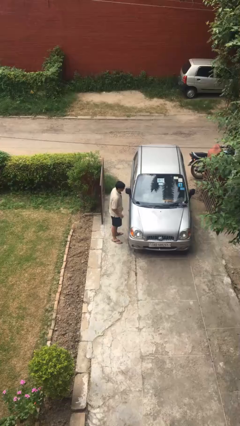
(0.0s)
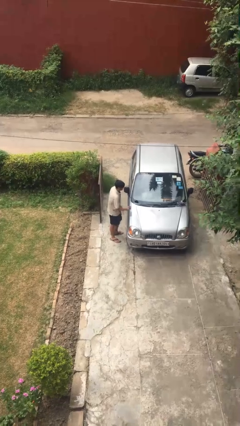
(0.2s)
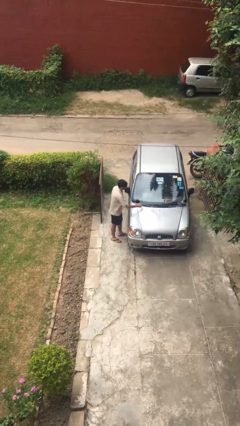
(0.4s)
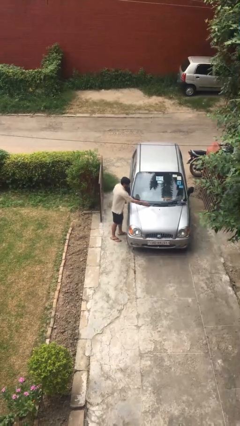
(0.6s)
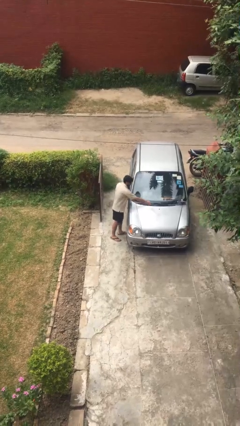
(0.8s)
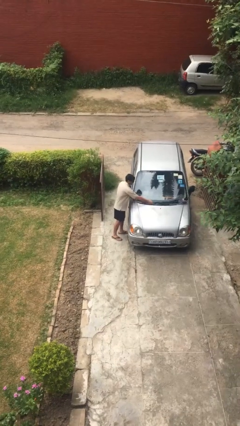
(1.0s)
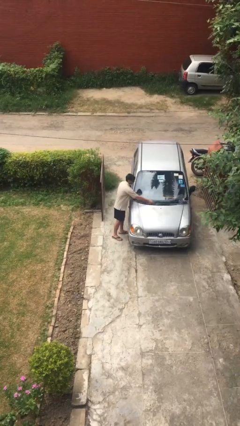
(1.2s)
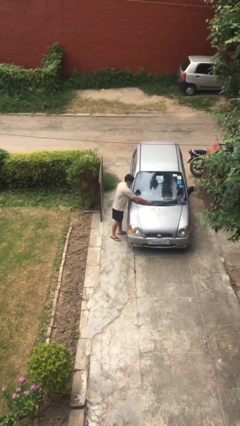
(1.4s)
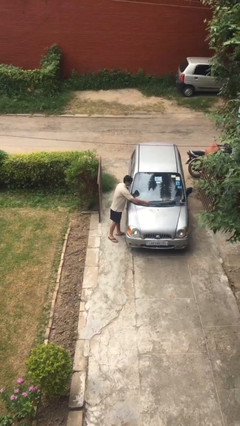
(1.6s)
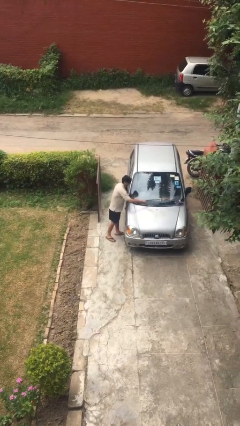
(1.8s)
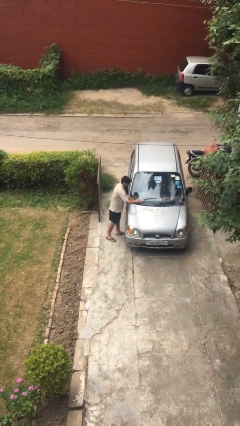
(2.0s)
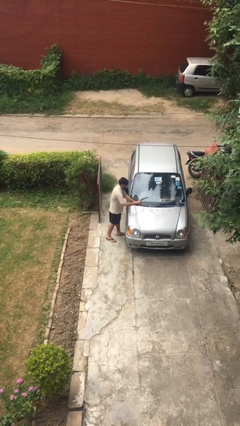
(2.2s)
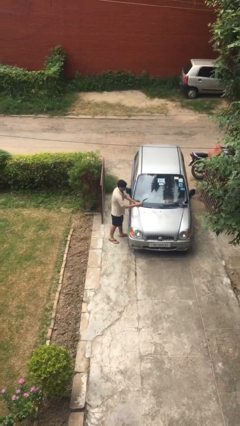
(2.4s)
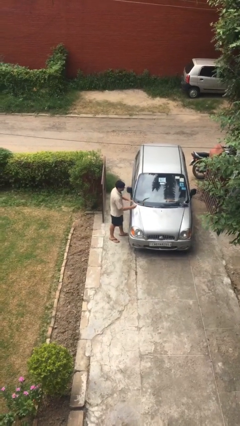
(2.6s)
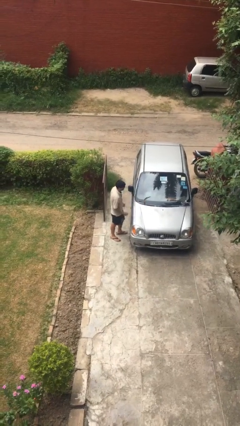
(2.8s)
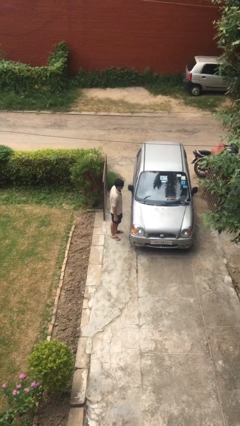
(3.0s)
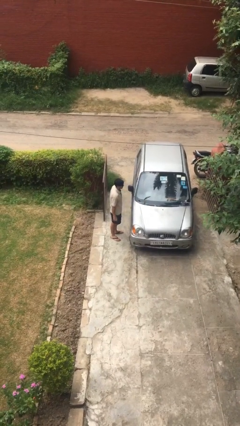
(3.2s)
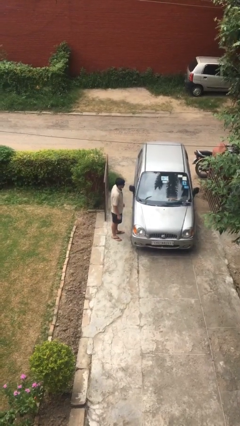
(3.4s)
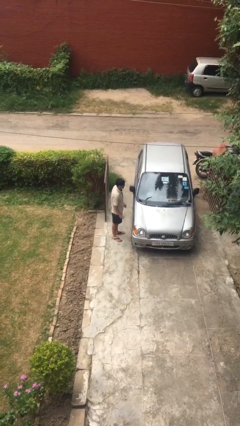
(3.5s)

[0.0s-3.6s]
person flips up car wipers

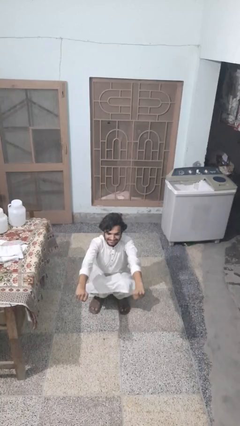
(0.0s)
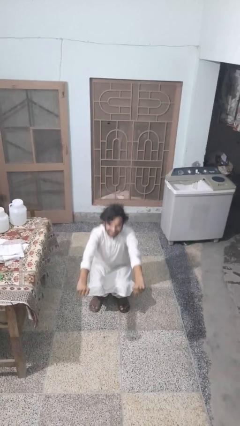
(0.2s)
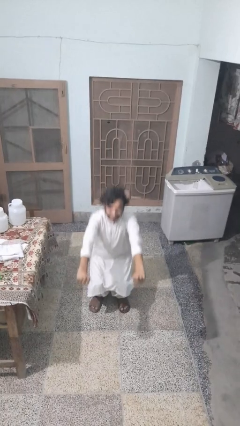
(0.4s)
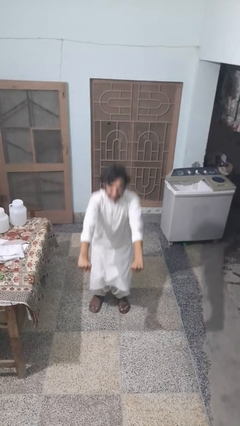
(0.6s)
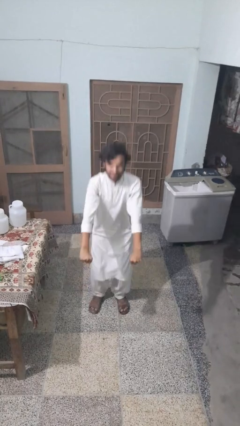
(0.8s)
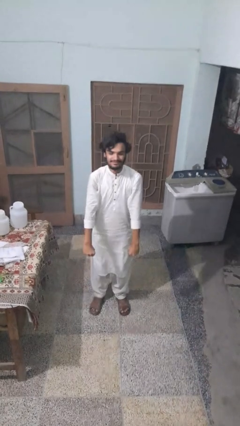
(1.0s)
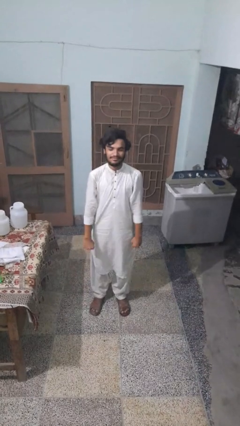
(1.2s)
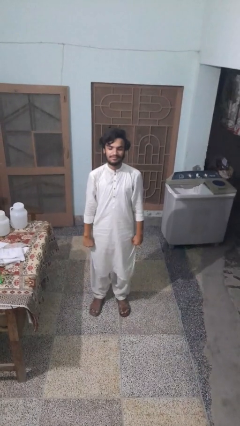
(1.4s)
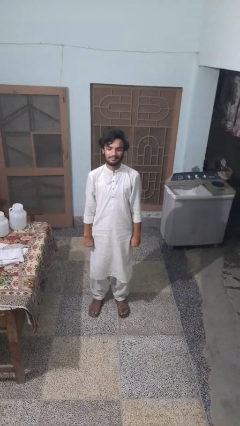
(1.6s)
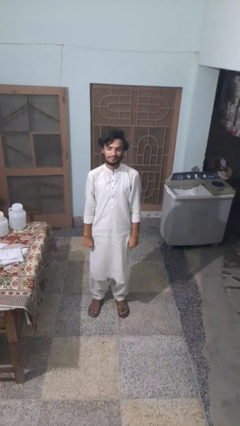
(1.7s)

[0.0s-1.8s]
person stands up

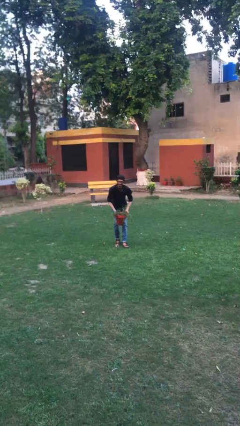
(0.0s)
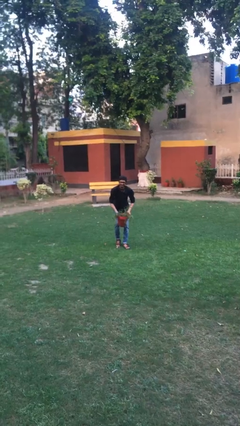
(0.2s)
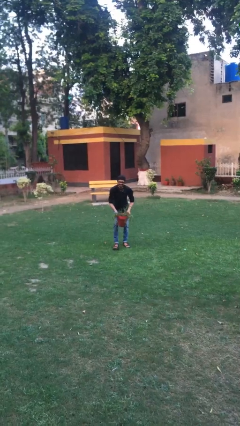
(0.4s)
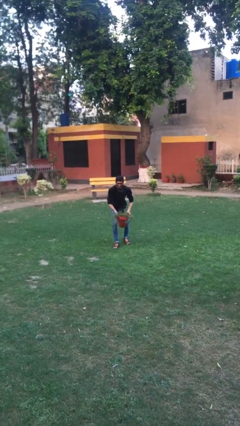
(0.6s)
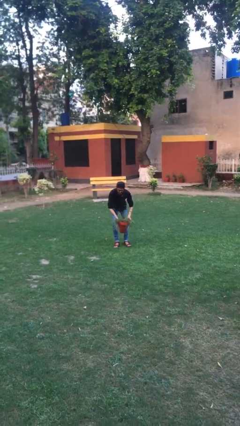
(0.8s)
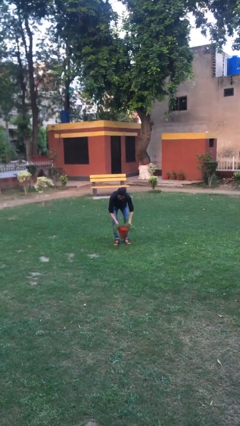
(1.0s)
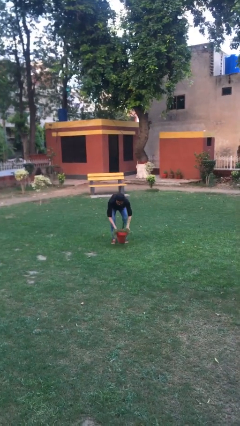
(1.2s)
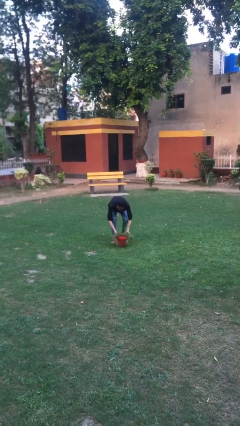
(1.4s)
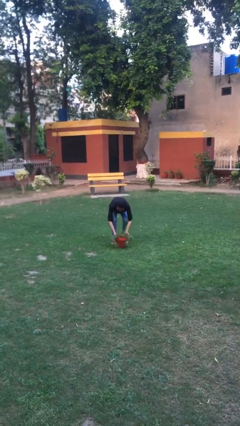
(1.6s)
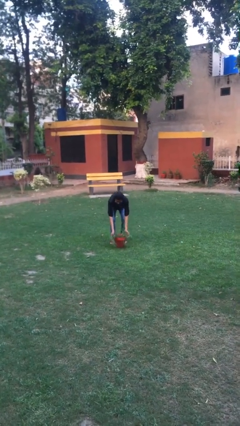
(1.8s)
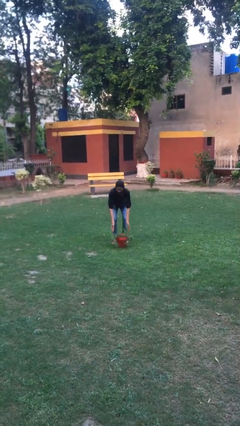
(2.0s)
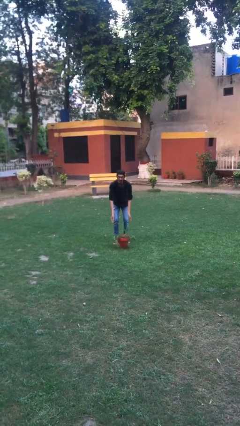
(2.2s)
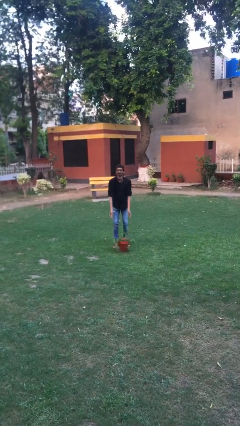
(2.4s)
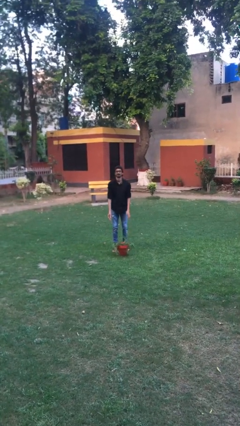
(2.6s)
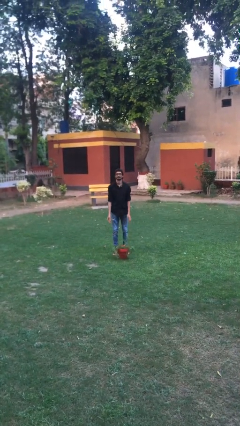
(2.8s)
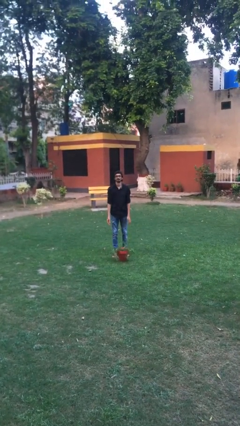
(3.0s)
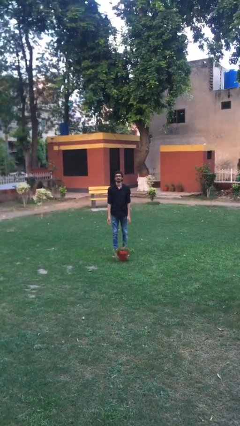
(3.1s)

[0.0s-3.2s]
person puts down object on floor

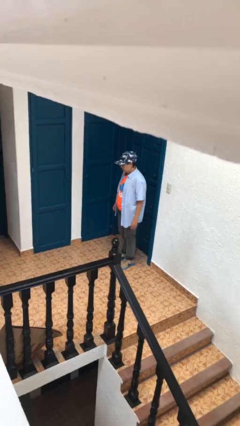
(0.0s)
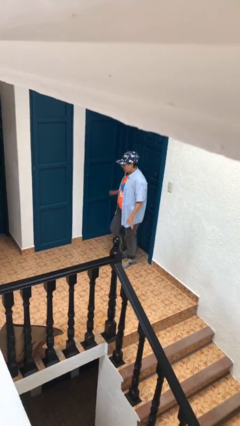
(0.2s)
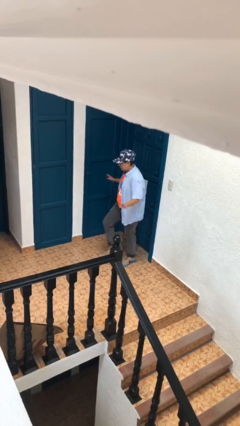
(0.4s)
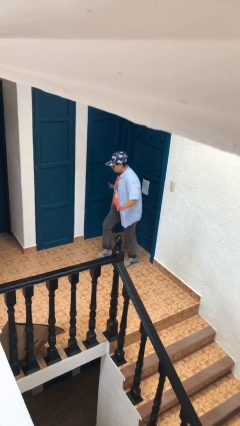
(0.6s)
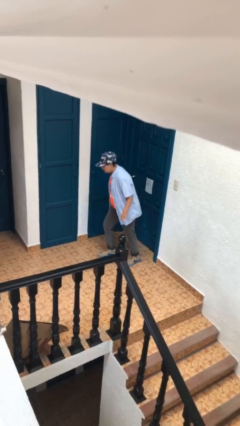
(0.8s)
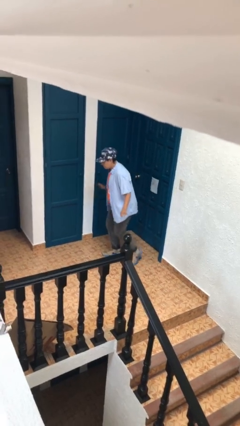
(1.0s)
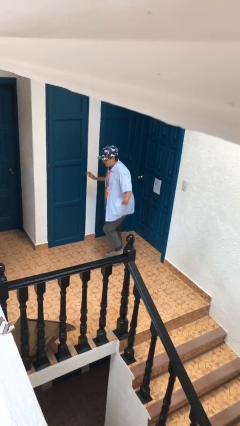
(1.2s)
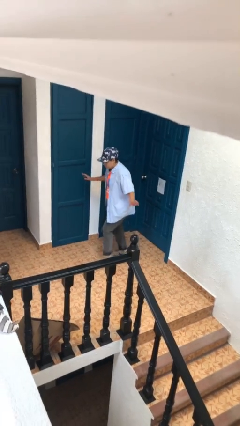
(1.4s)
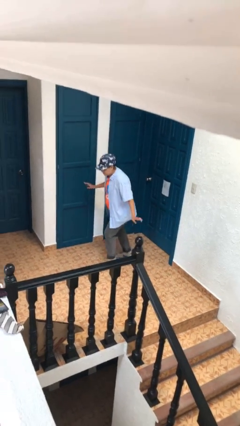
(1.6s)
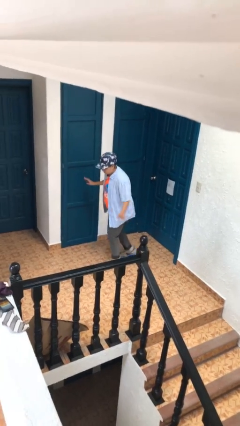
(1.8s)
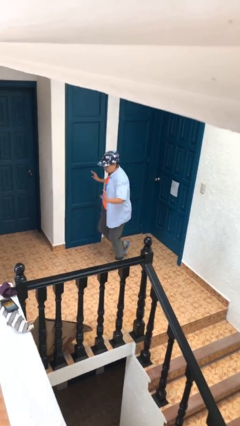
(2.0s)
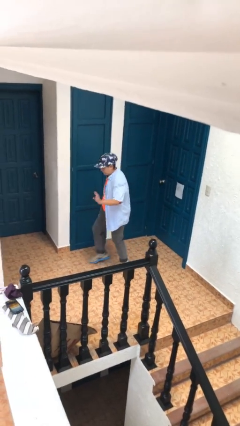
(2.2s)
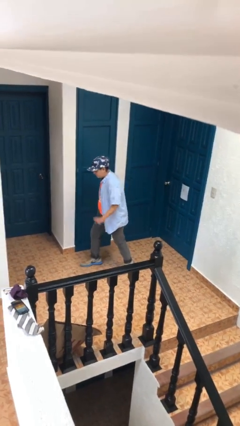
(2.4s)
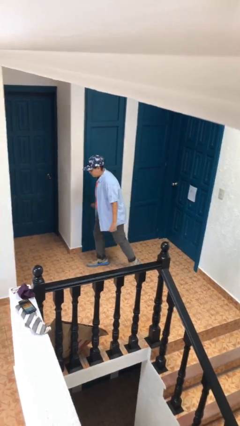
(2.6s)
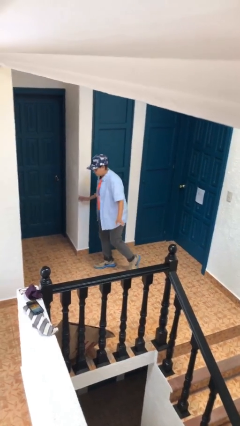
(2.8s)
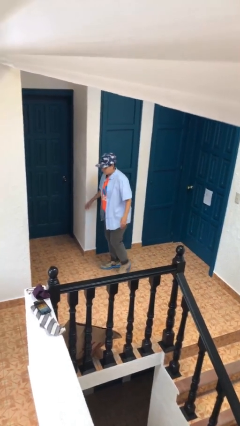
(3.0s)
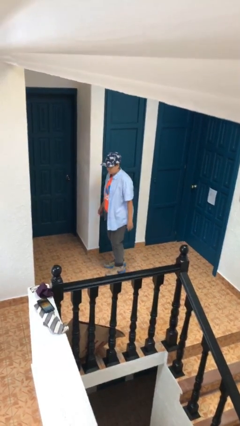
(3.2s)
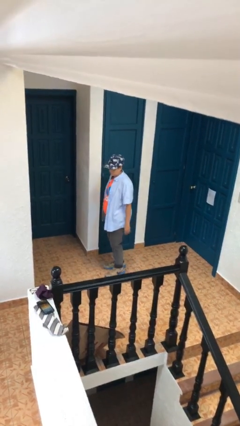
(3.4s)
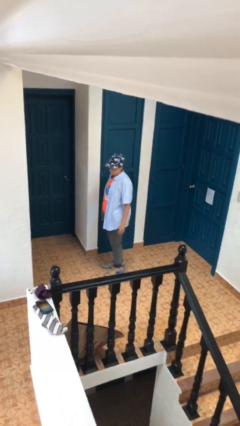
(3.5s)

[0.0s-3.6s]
person walks tiptoe

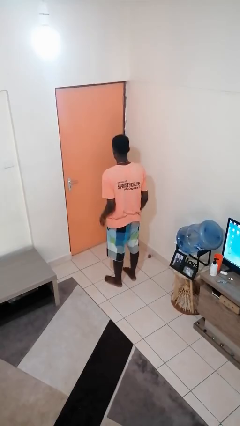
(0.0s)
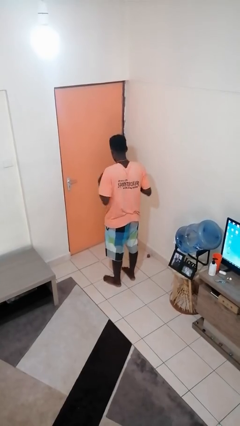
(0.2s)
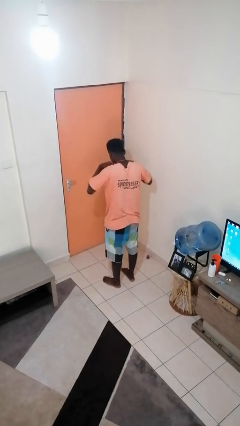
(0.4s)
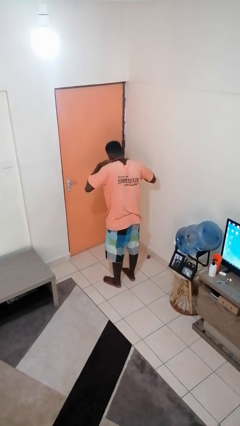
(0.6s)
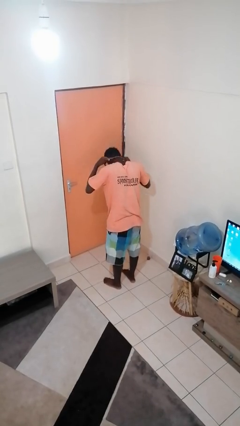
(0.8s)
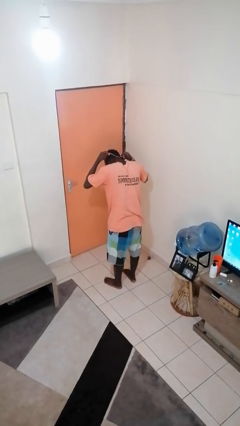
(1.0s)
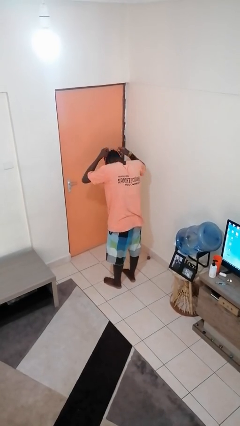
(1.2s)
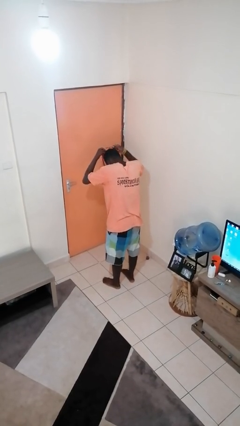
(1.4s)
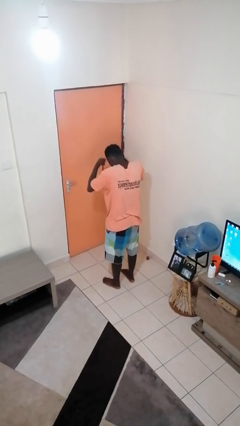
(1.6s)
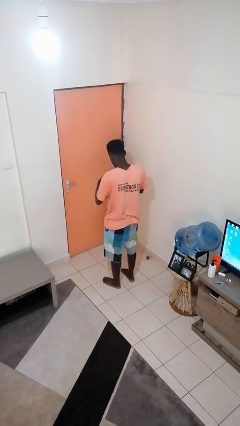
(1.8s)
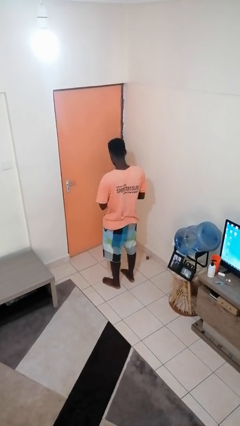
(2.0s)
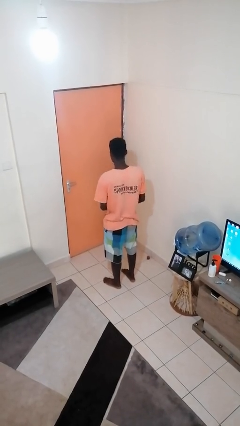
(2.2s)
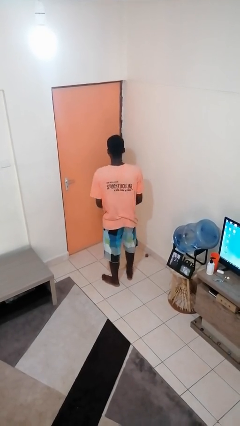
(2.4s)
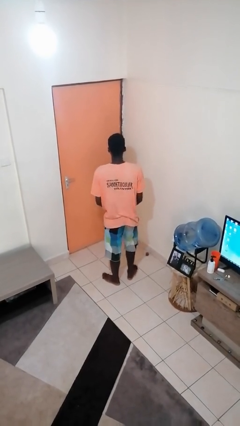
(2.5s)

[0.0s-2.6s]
person takes off necklace

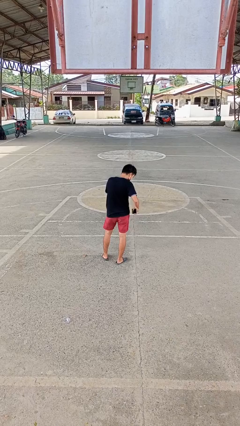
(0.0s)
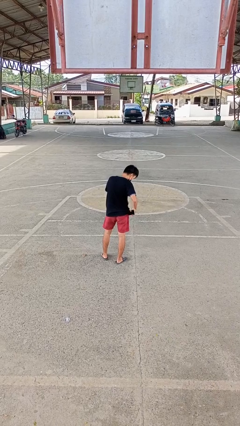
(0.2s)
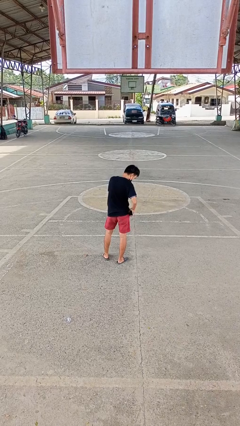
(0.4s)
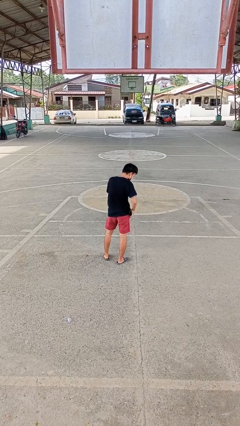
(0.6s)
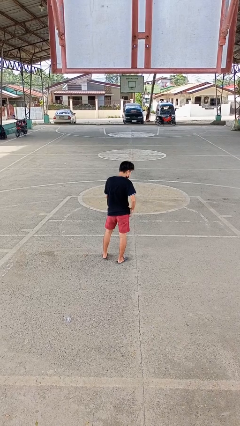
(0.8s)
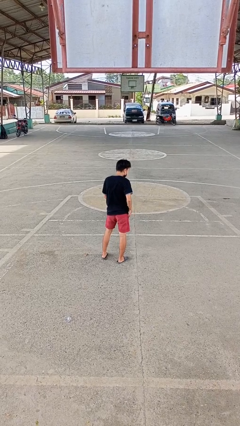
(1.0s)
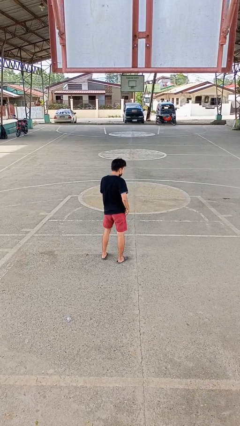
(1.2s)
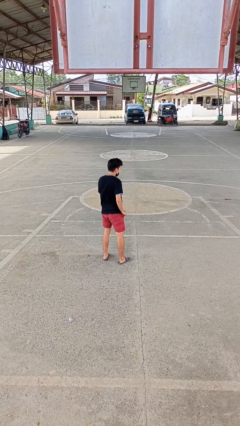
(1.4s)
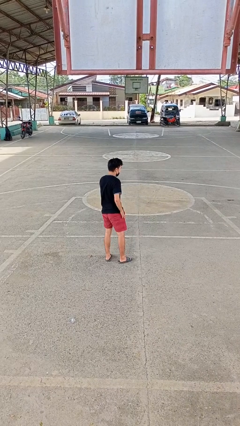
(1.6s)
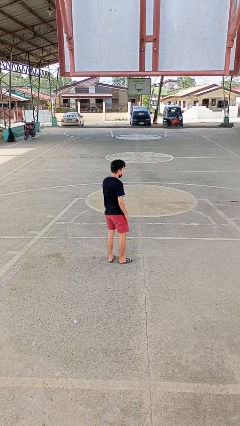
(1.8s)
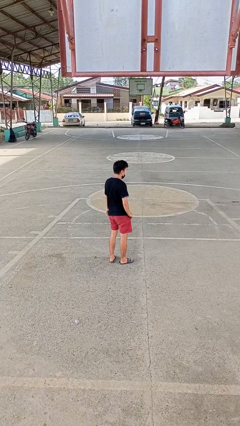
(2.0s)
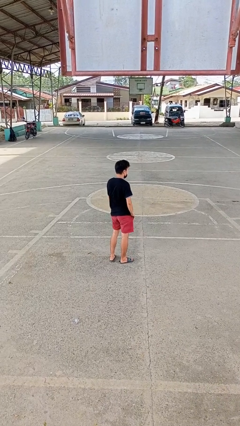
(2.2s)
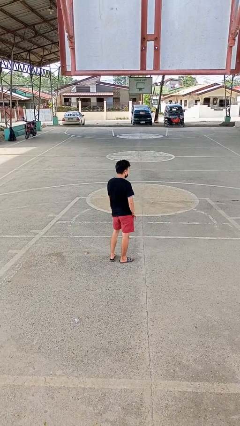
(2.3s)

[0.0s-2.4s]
person puts phone into pocket

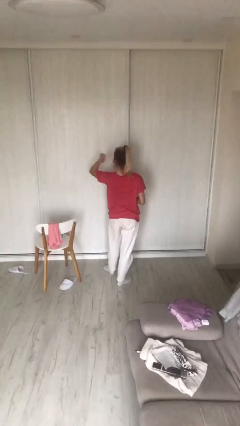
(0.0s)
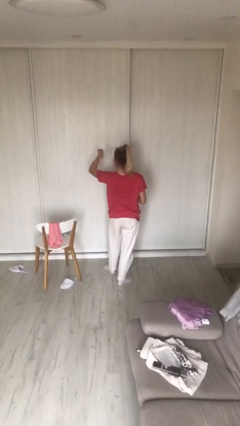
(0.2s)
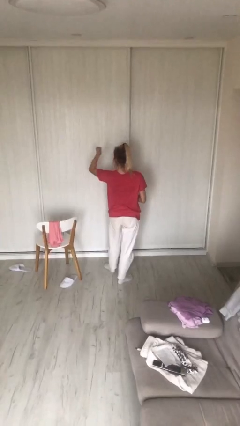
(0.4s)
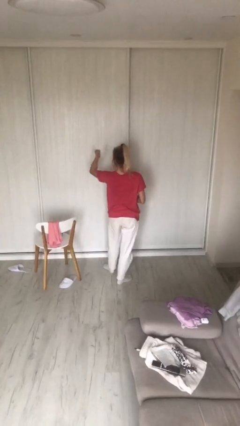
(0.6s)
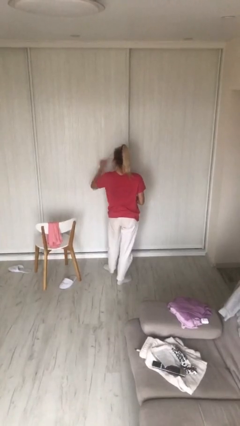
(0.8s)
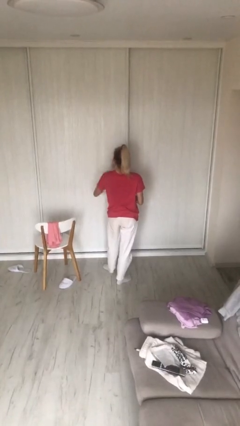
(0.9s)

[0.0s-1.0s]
person gestures behind me
